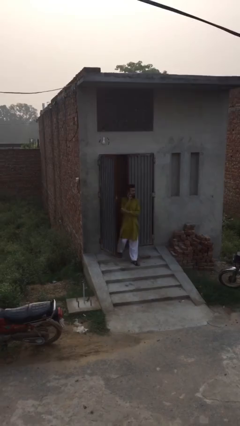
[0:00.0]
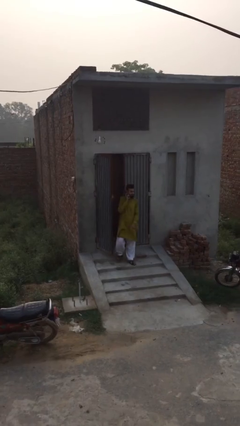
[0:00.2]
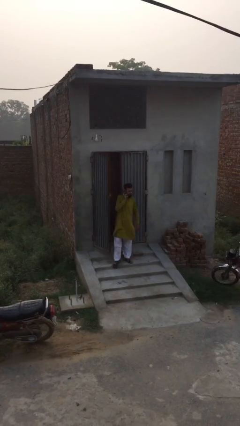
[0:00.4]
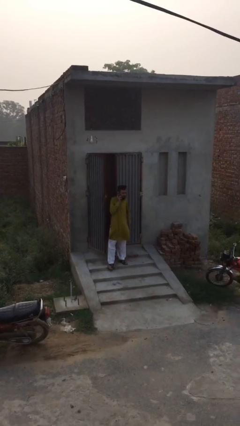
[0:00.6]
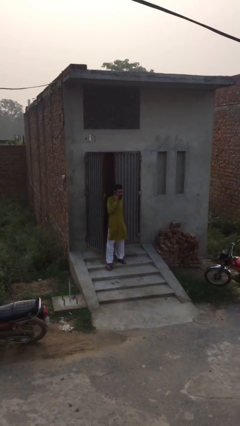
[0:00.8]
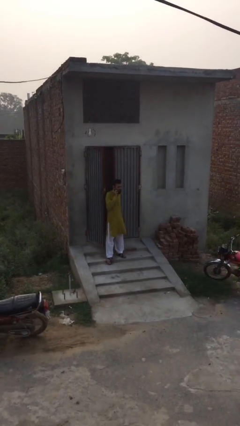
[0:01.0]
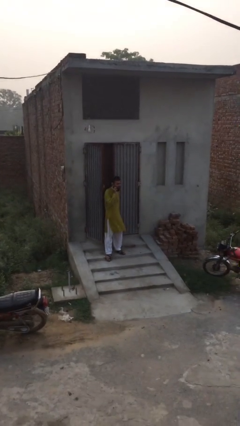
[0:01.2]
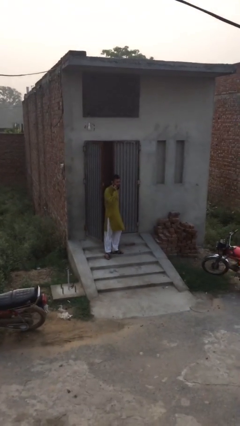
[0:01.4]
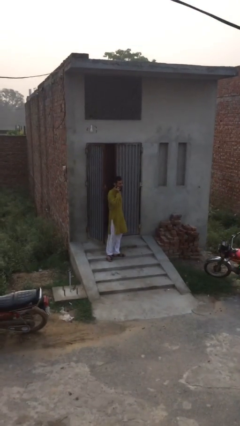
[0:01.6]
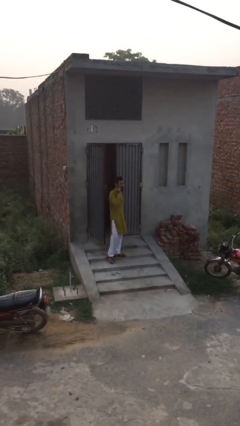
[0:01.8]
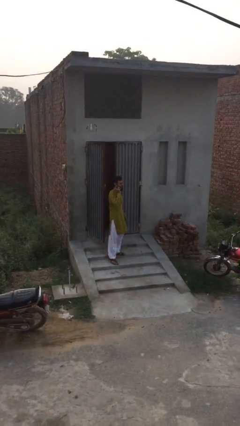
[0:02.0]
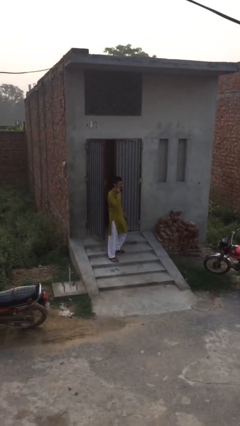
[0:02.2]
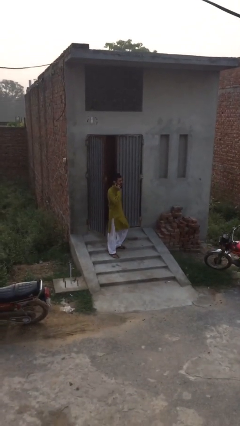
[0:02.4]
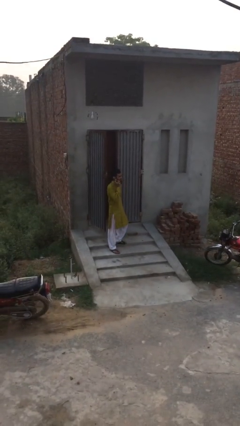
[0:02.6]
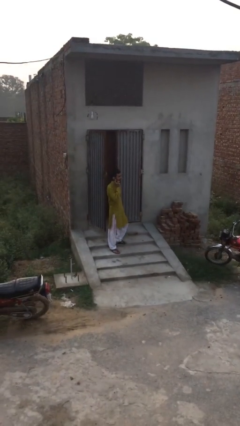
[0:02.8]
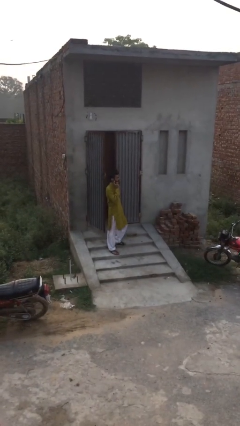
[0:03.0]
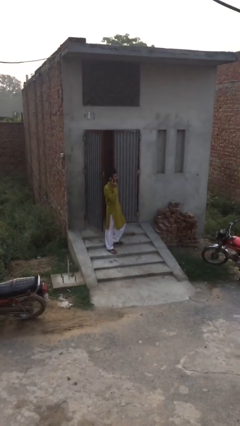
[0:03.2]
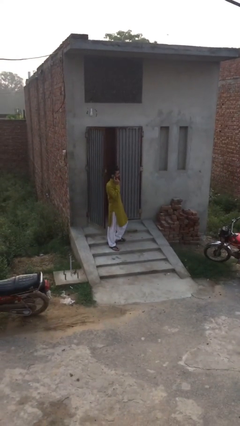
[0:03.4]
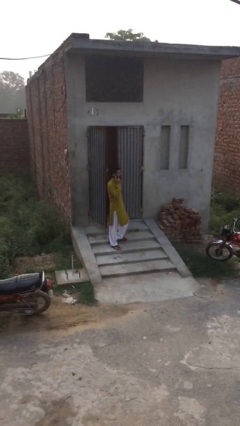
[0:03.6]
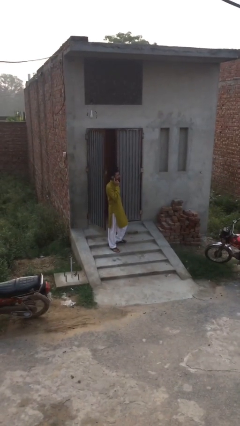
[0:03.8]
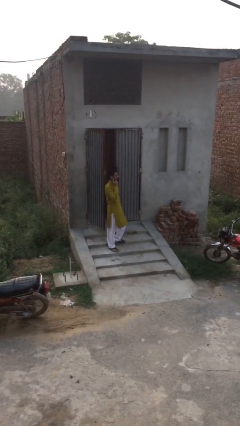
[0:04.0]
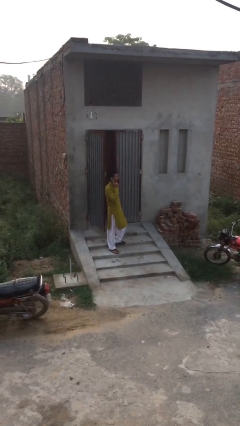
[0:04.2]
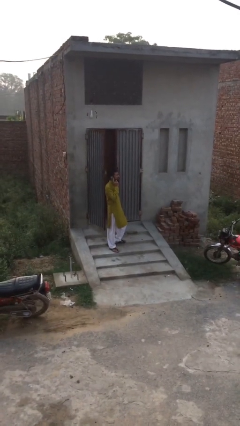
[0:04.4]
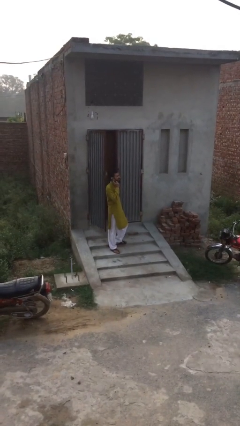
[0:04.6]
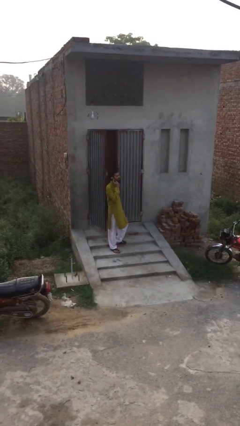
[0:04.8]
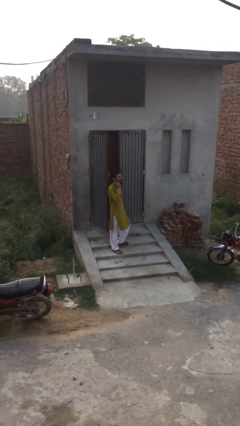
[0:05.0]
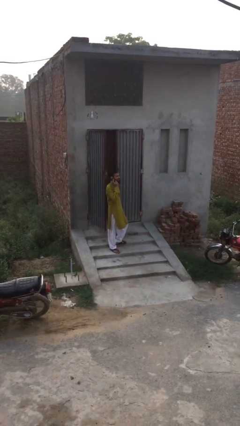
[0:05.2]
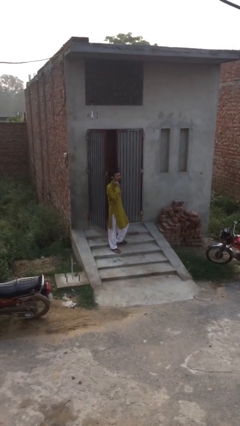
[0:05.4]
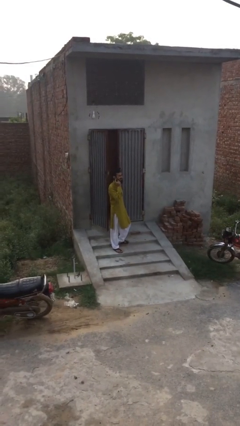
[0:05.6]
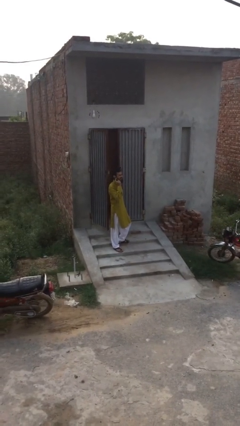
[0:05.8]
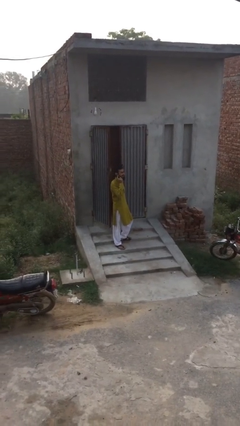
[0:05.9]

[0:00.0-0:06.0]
person enters scene through structure

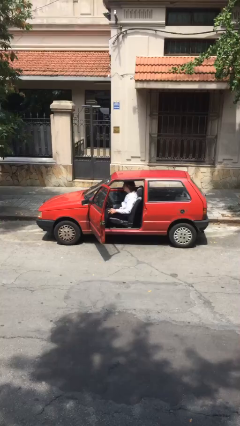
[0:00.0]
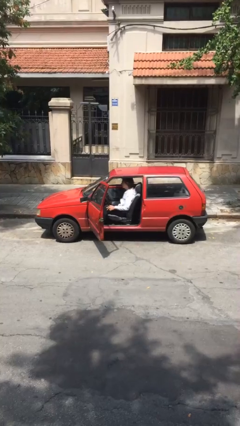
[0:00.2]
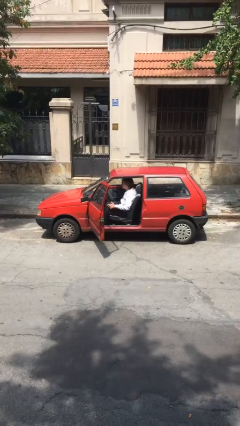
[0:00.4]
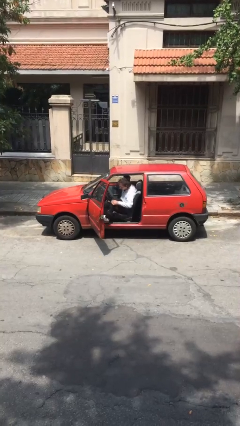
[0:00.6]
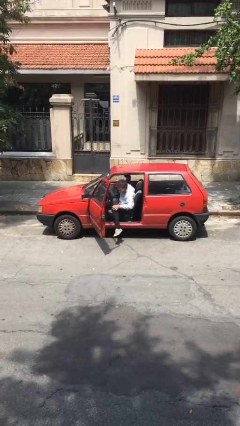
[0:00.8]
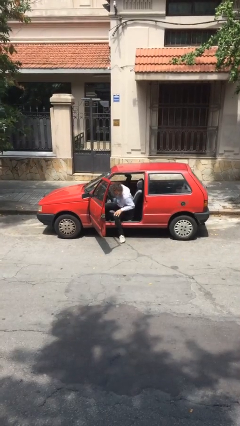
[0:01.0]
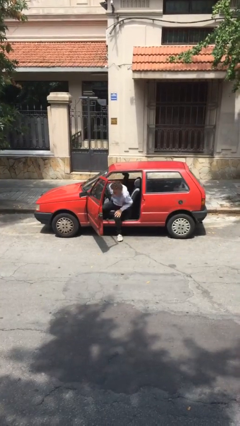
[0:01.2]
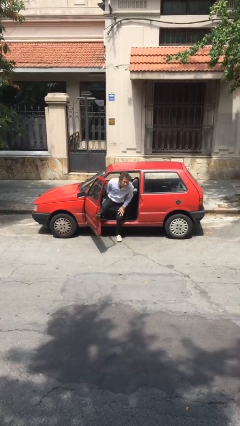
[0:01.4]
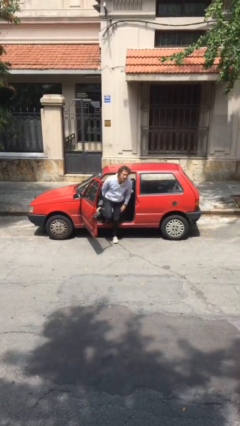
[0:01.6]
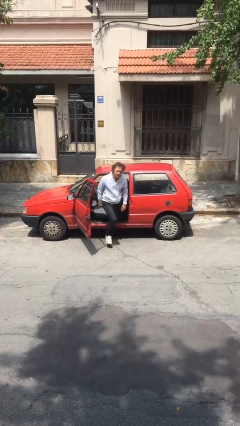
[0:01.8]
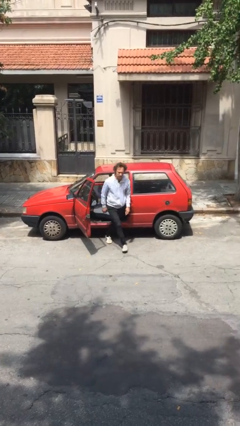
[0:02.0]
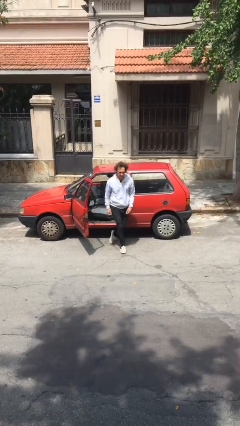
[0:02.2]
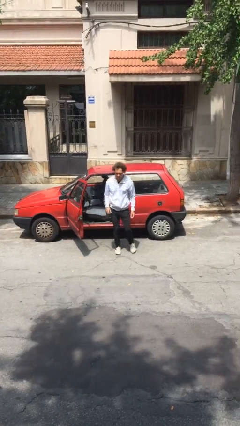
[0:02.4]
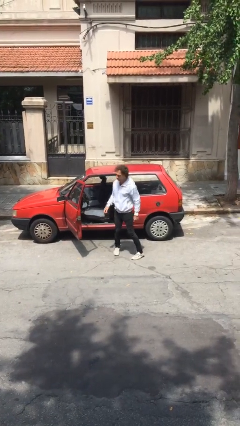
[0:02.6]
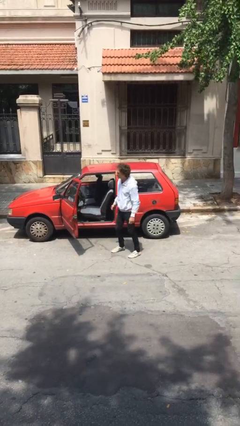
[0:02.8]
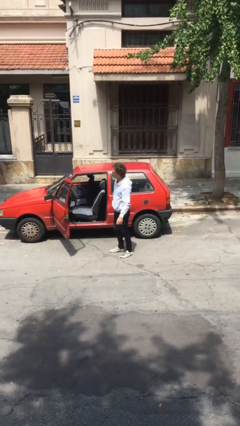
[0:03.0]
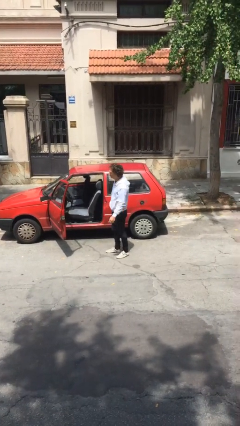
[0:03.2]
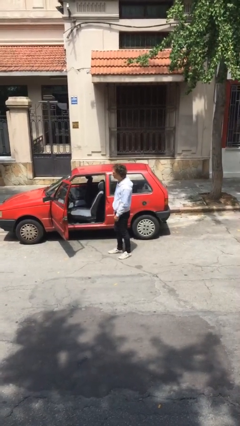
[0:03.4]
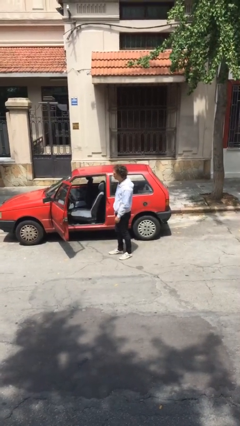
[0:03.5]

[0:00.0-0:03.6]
person exits car

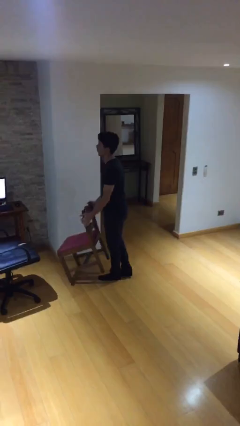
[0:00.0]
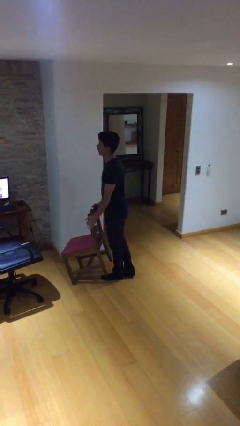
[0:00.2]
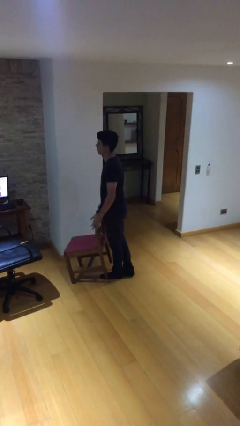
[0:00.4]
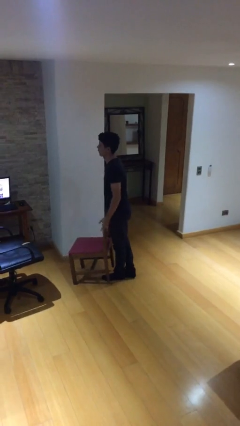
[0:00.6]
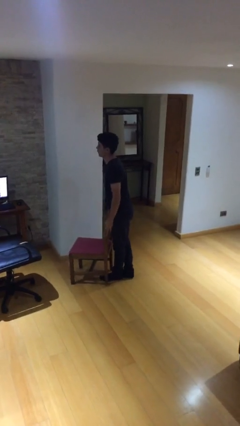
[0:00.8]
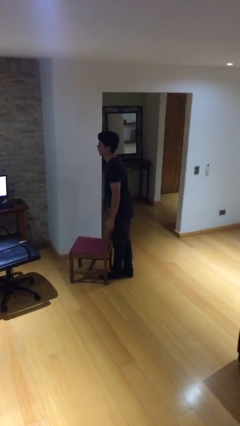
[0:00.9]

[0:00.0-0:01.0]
person puts down object on floor

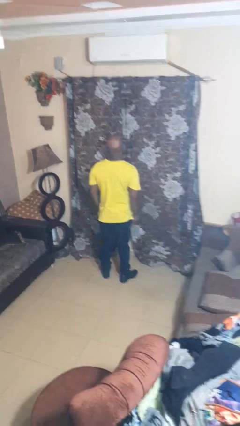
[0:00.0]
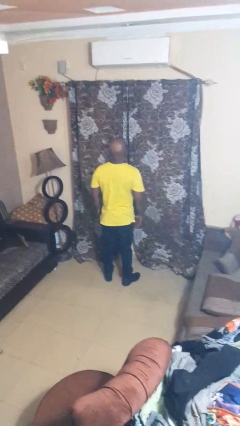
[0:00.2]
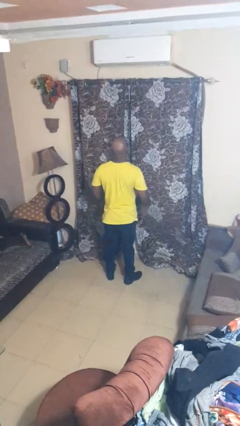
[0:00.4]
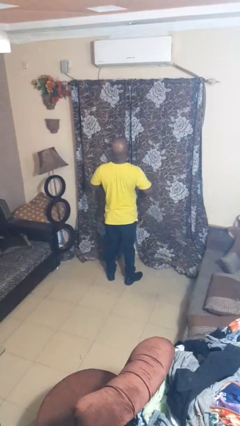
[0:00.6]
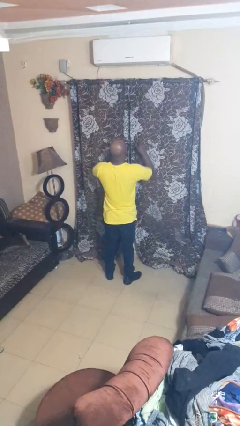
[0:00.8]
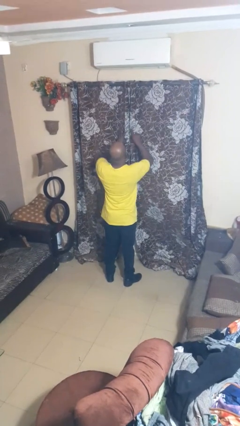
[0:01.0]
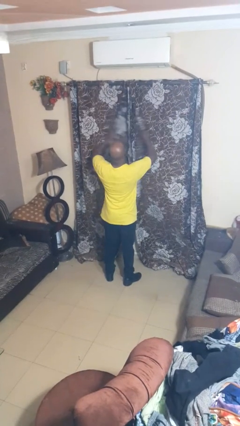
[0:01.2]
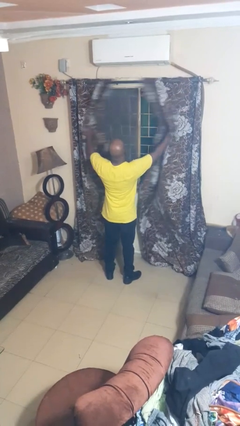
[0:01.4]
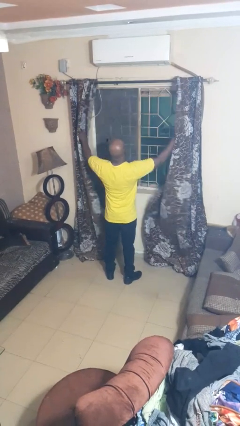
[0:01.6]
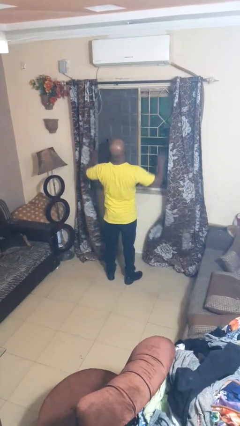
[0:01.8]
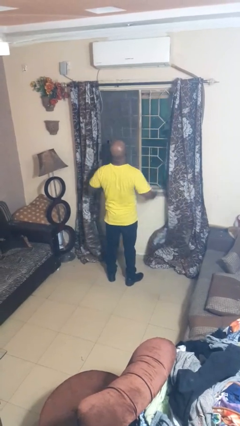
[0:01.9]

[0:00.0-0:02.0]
person opens curtains

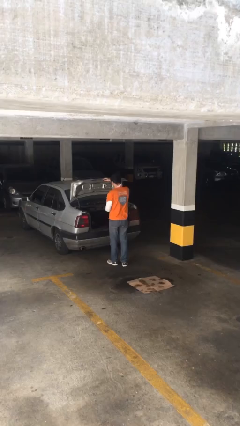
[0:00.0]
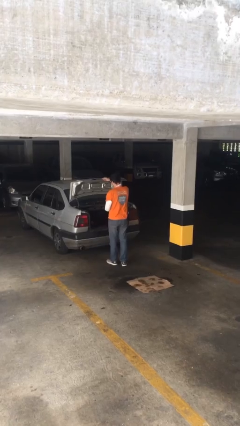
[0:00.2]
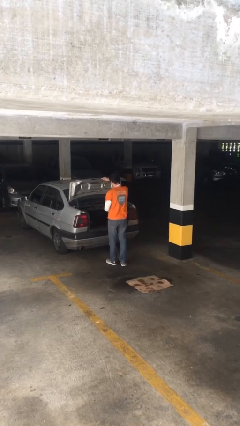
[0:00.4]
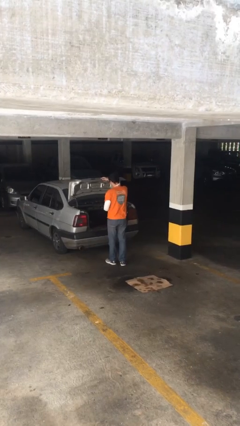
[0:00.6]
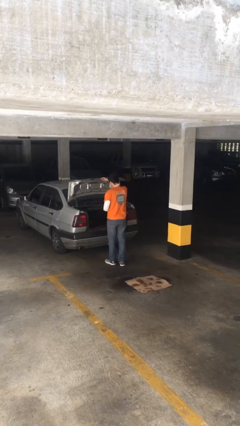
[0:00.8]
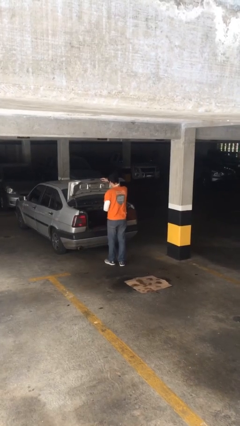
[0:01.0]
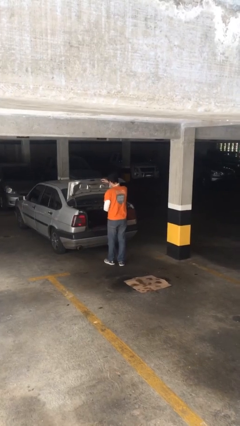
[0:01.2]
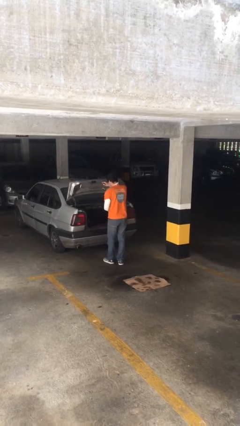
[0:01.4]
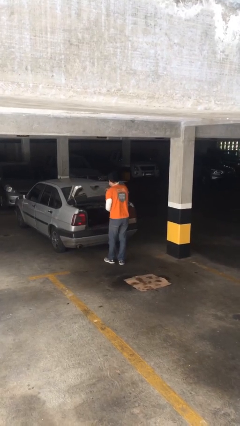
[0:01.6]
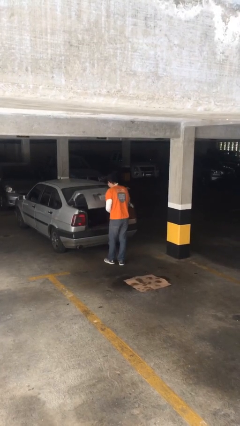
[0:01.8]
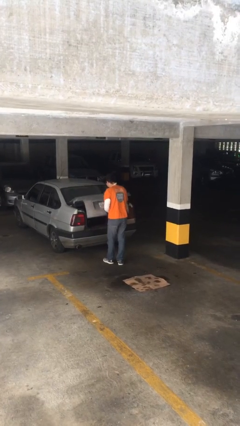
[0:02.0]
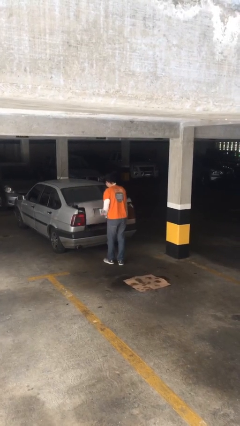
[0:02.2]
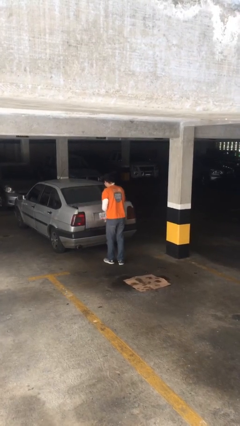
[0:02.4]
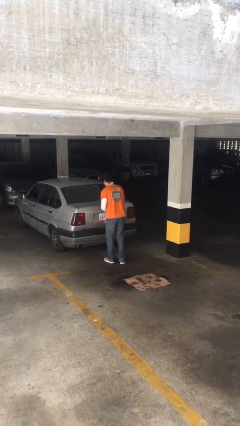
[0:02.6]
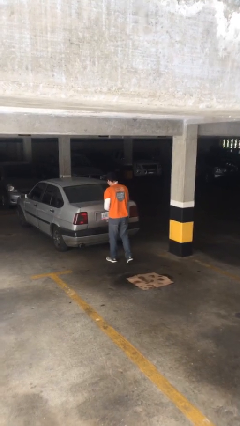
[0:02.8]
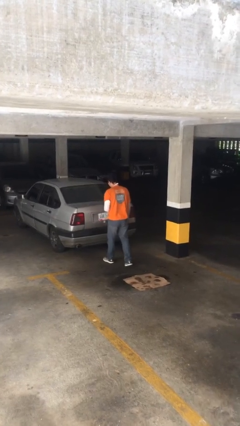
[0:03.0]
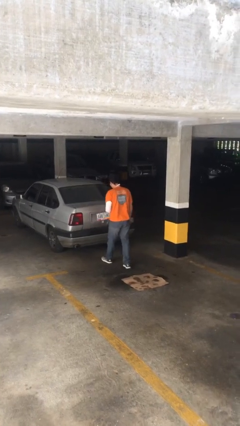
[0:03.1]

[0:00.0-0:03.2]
person closes car trunk

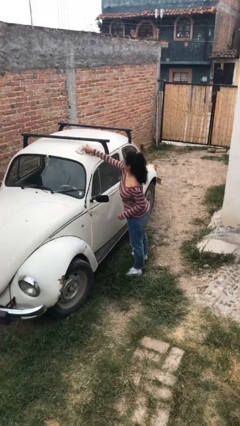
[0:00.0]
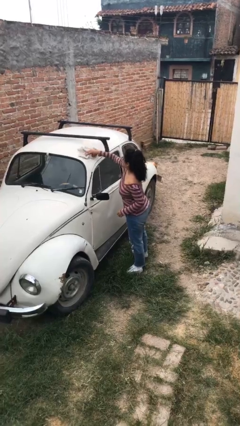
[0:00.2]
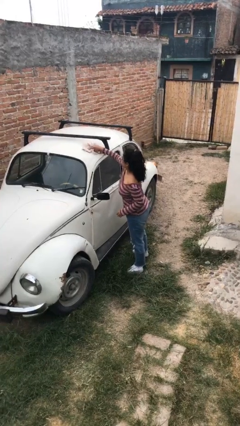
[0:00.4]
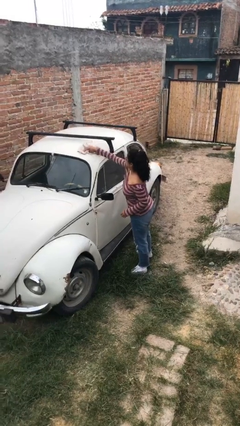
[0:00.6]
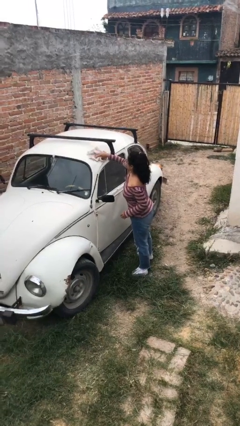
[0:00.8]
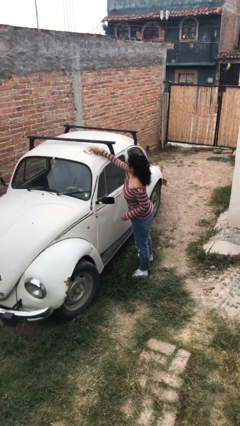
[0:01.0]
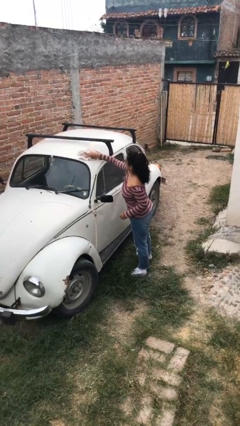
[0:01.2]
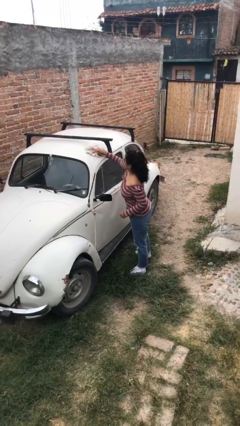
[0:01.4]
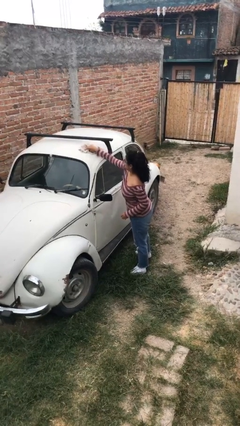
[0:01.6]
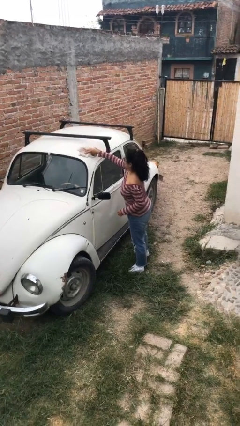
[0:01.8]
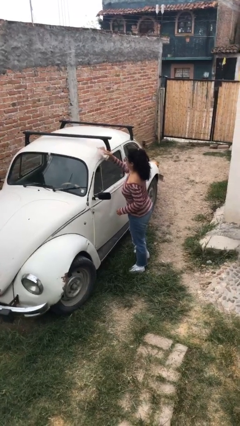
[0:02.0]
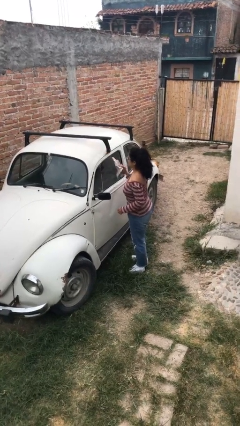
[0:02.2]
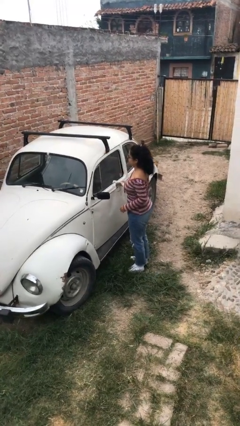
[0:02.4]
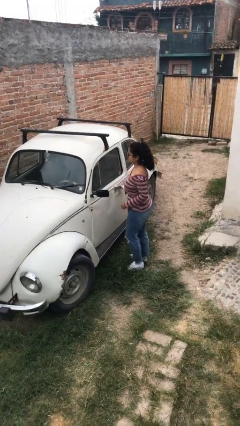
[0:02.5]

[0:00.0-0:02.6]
person polishes car with rag
